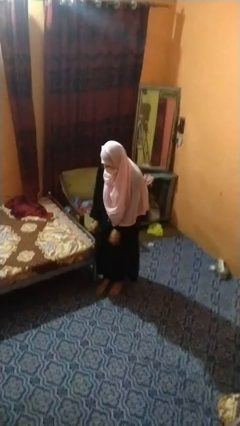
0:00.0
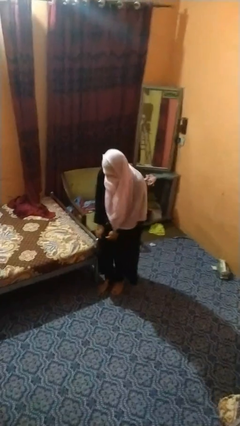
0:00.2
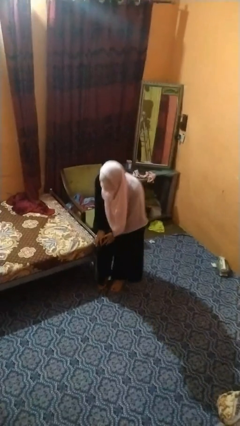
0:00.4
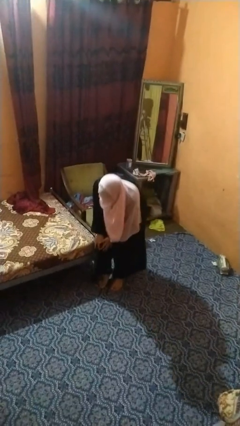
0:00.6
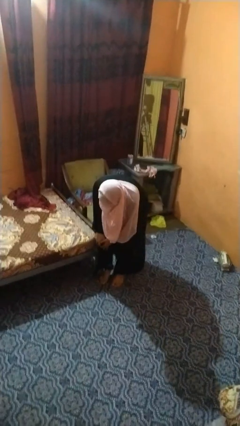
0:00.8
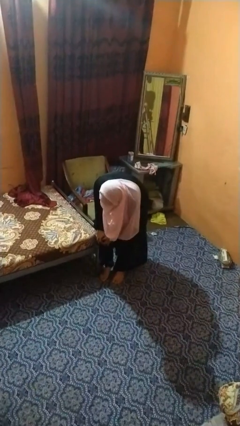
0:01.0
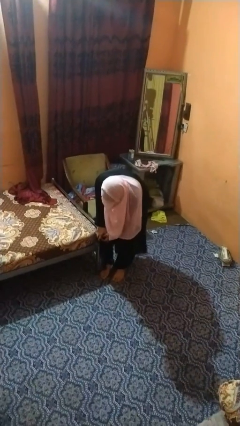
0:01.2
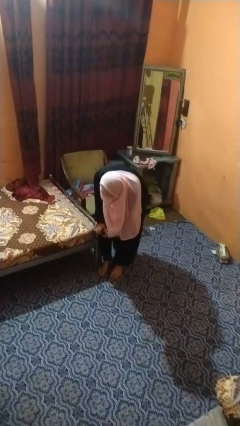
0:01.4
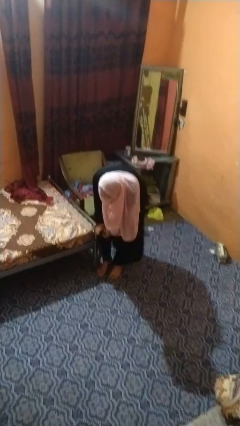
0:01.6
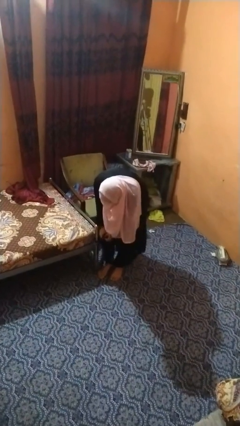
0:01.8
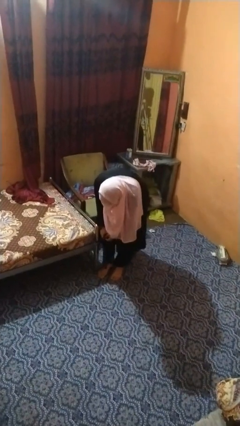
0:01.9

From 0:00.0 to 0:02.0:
person trips on object on floor

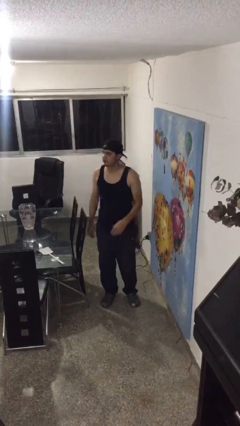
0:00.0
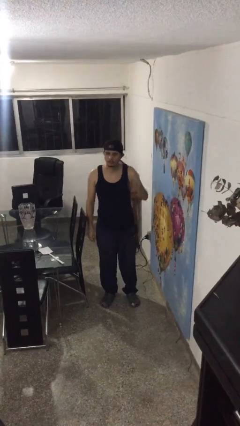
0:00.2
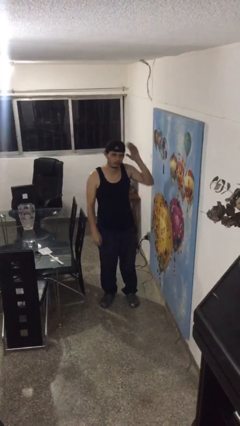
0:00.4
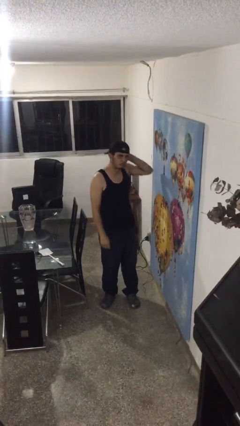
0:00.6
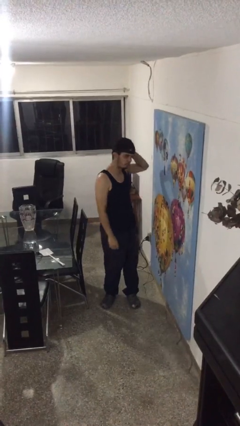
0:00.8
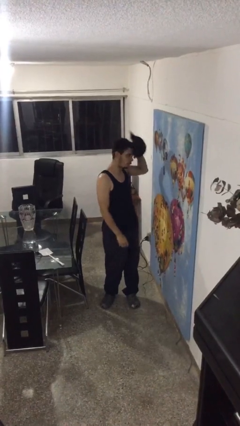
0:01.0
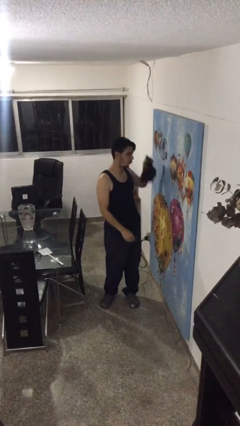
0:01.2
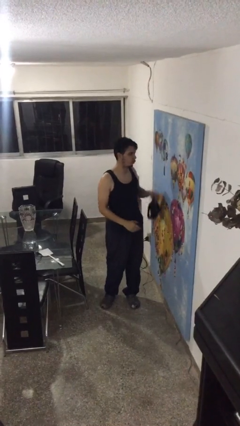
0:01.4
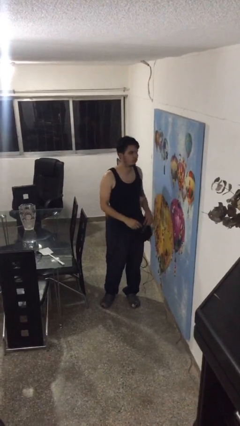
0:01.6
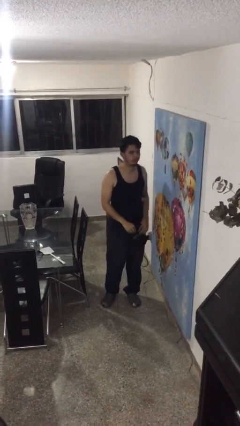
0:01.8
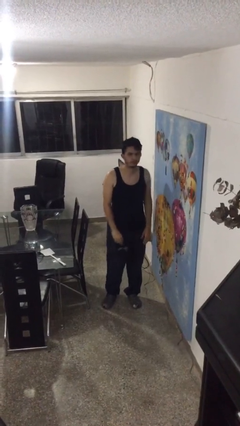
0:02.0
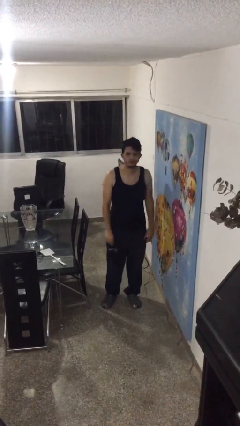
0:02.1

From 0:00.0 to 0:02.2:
person takes off hat

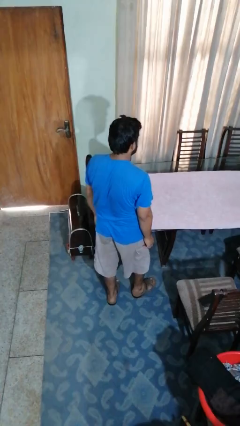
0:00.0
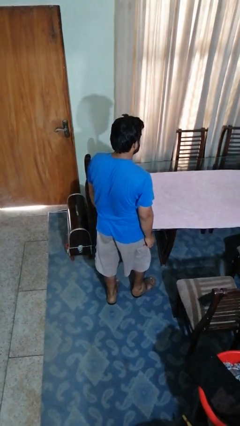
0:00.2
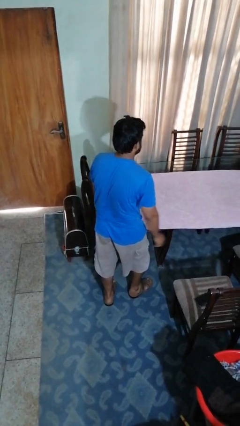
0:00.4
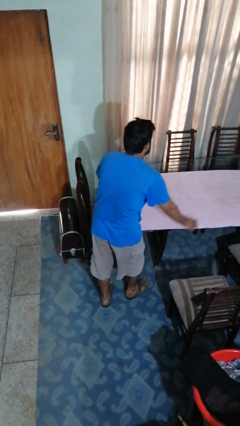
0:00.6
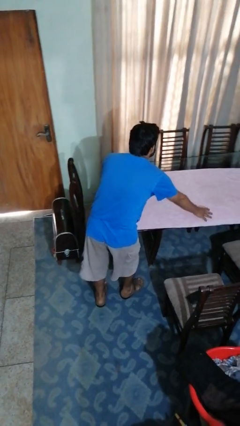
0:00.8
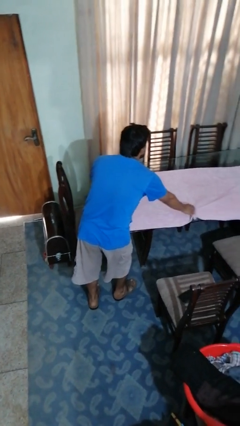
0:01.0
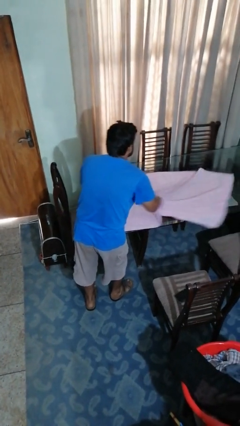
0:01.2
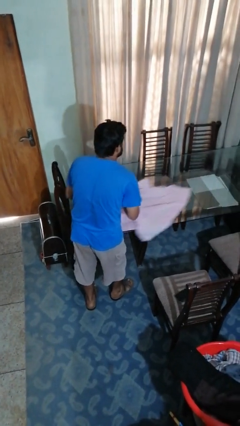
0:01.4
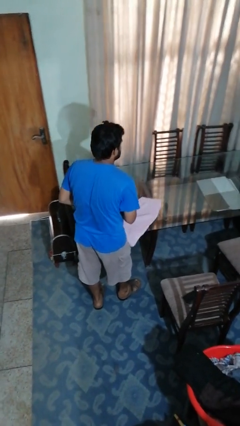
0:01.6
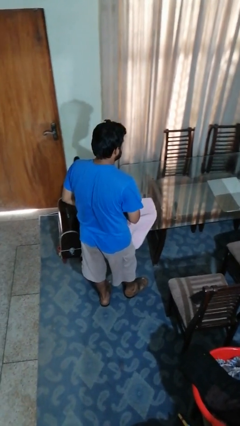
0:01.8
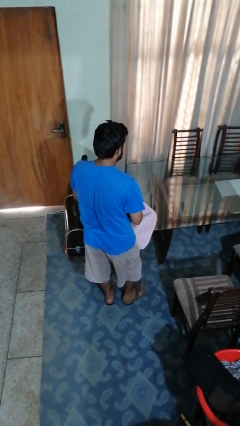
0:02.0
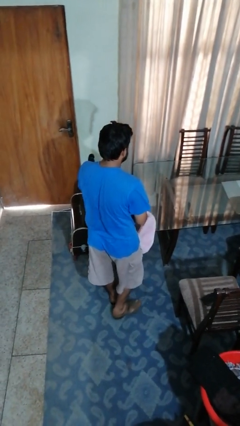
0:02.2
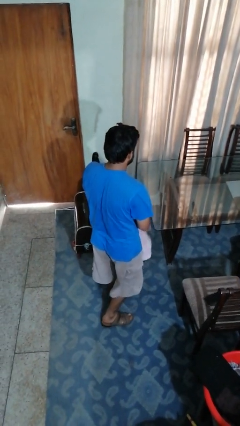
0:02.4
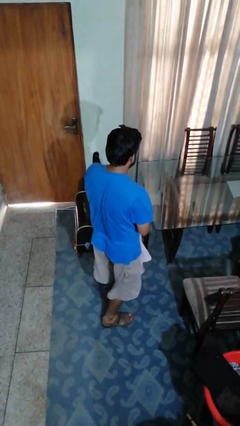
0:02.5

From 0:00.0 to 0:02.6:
person folds tablecloth

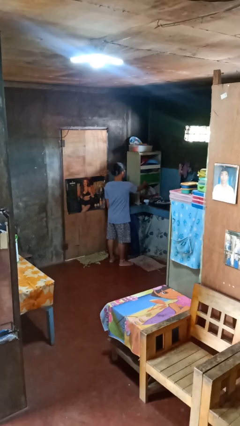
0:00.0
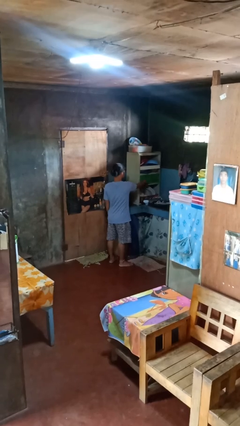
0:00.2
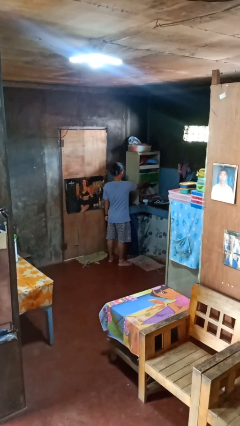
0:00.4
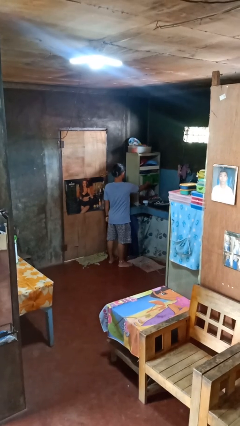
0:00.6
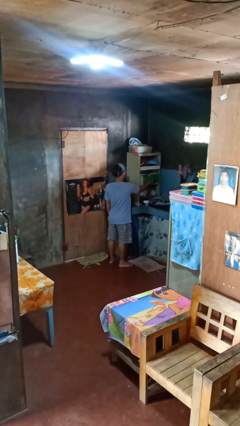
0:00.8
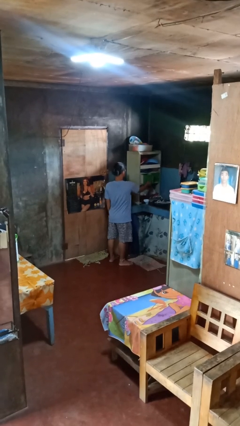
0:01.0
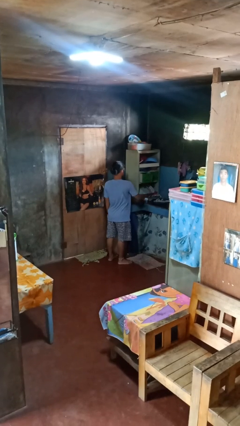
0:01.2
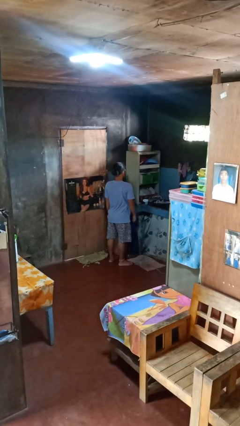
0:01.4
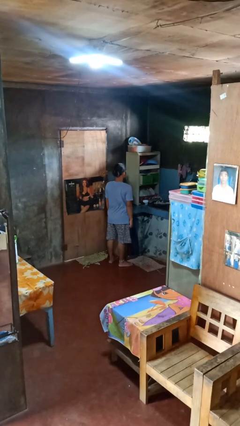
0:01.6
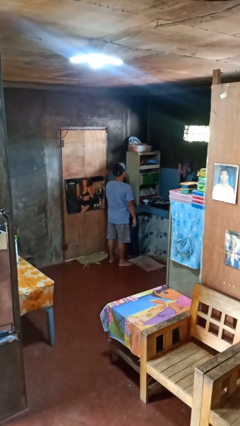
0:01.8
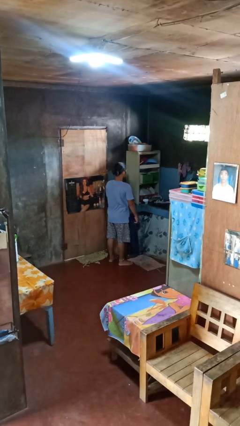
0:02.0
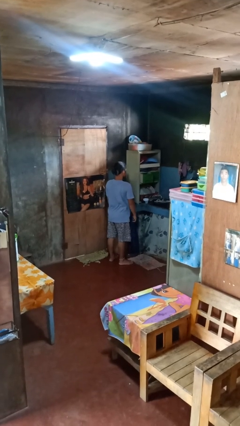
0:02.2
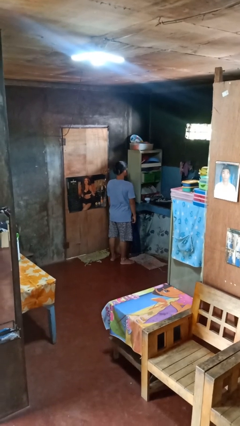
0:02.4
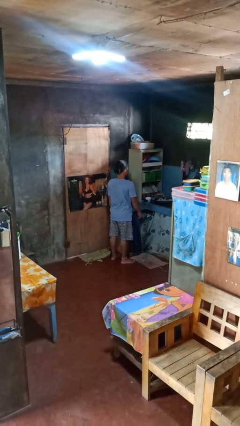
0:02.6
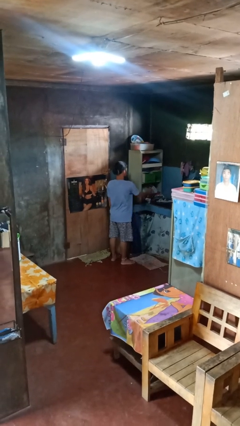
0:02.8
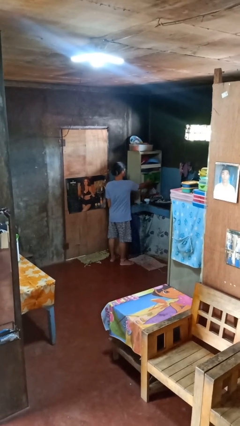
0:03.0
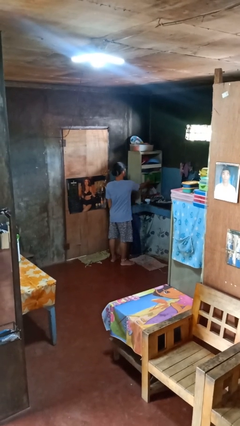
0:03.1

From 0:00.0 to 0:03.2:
person opens kitchen drawer

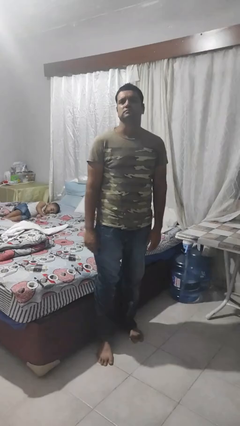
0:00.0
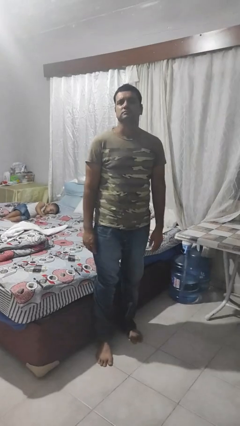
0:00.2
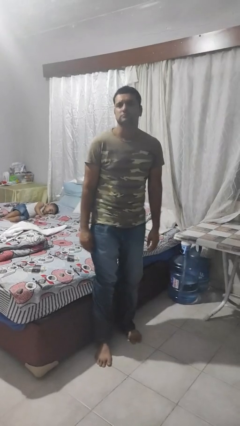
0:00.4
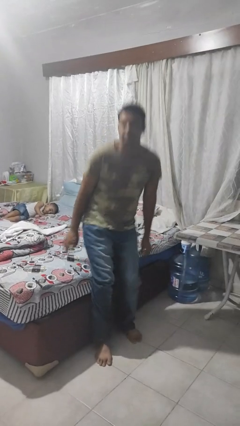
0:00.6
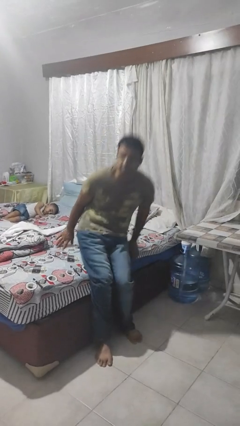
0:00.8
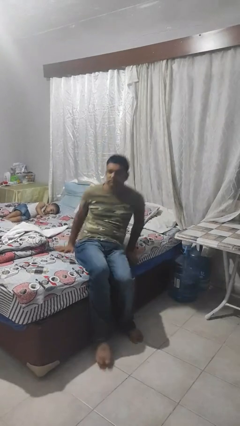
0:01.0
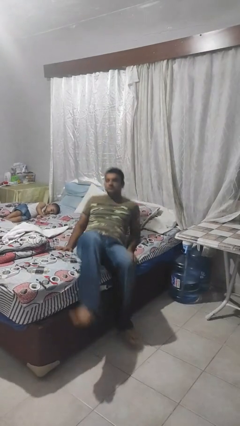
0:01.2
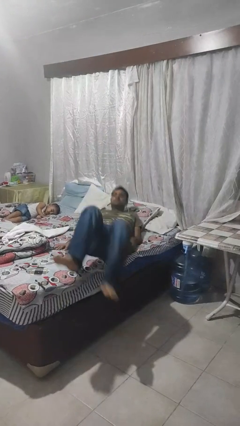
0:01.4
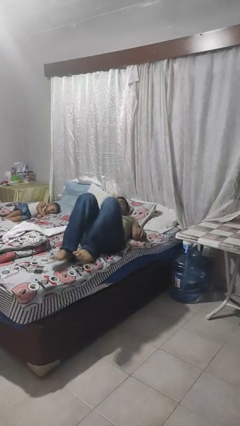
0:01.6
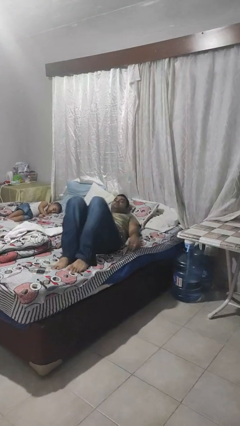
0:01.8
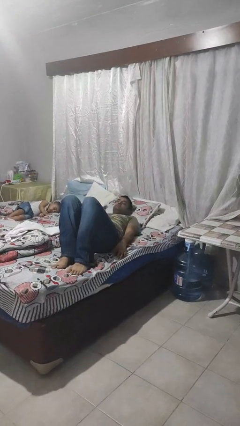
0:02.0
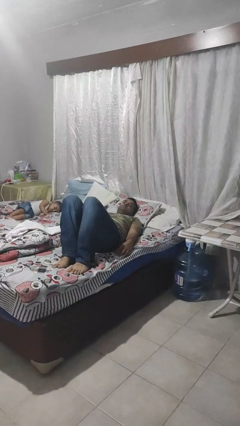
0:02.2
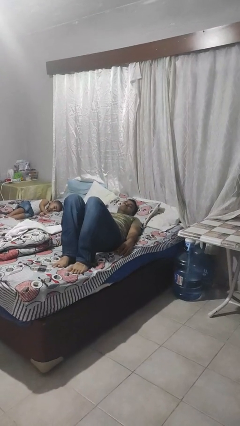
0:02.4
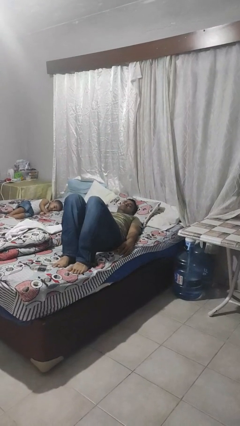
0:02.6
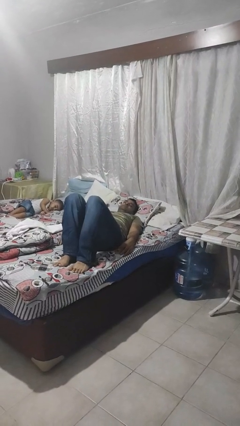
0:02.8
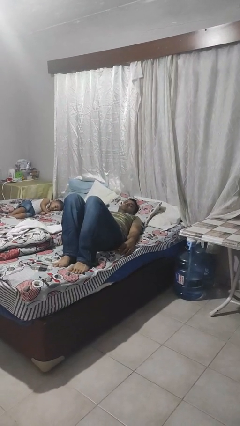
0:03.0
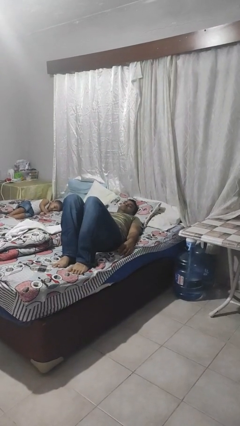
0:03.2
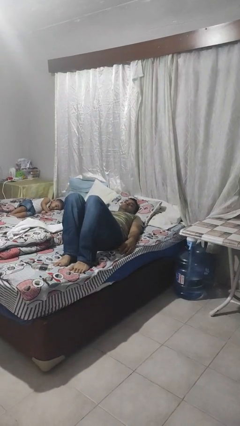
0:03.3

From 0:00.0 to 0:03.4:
person lies down on bed

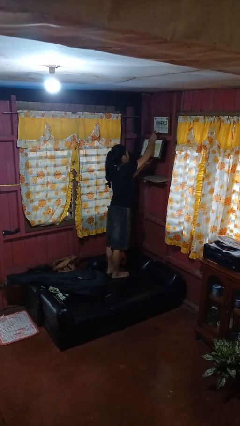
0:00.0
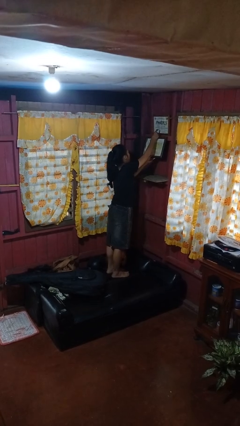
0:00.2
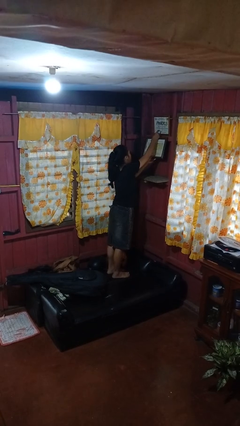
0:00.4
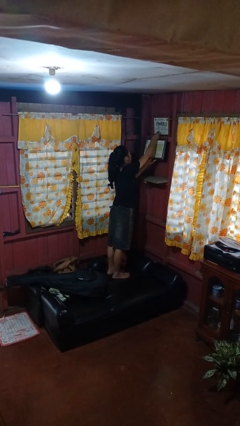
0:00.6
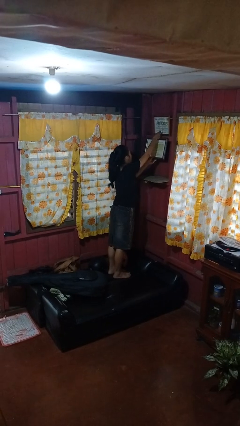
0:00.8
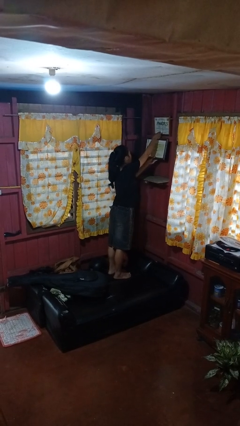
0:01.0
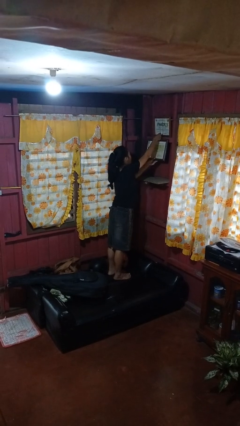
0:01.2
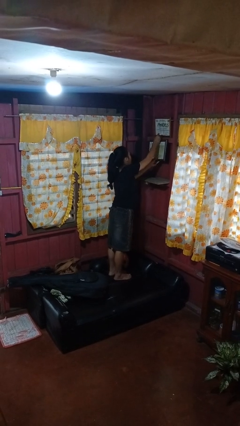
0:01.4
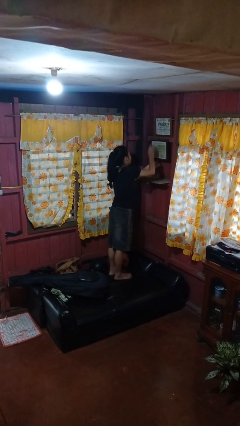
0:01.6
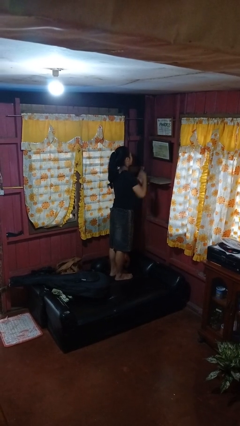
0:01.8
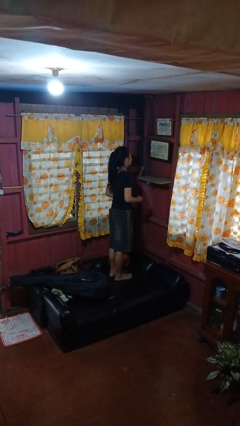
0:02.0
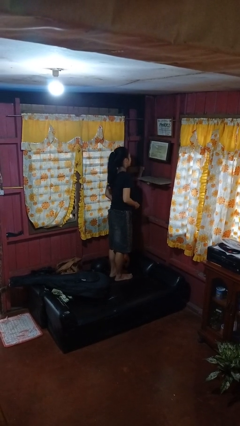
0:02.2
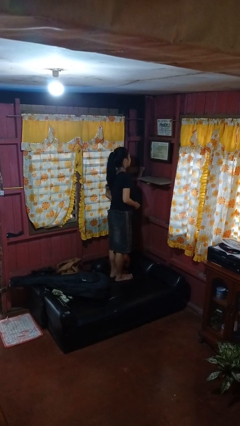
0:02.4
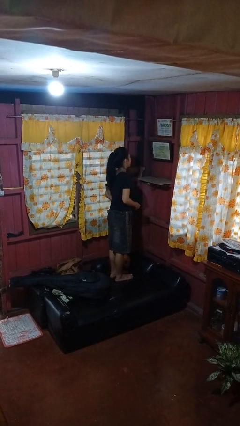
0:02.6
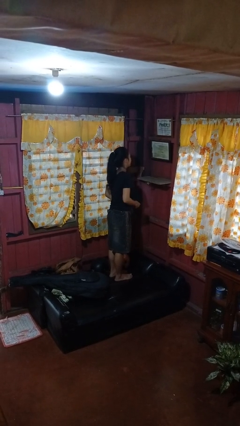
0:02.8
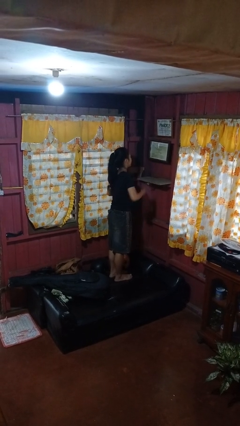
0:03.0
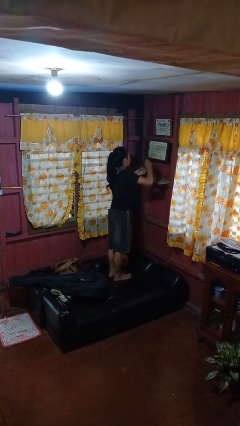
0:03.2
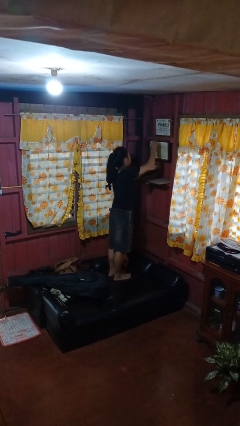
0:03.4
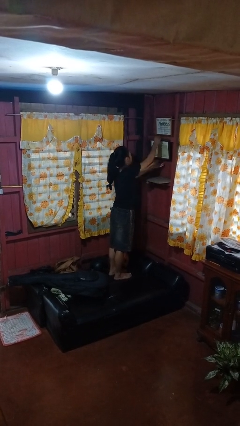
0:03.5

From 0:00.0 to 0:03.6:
person puts up picture frame

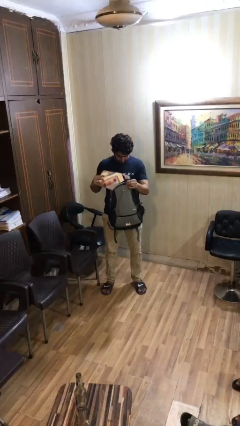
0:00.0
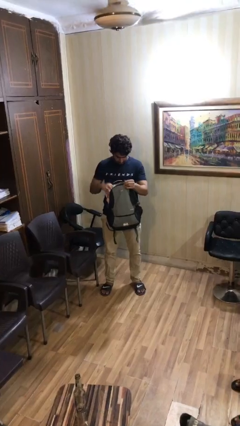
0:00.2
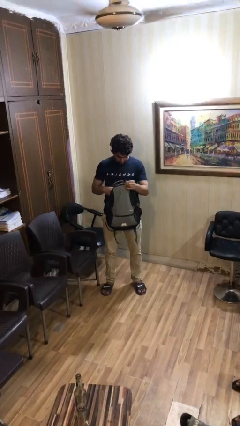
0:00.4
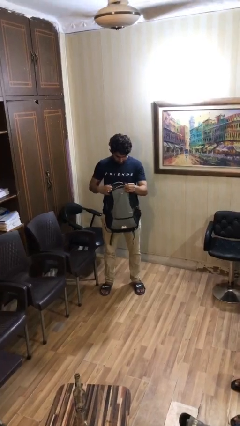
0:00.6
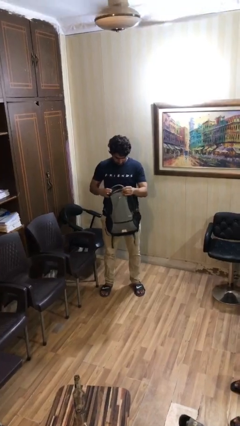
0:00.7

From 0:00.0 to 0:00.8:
person puts object into backpack
